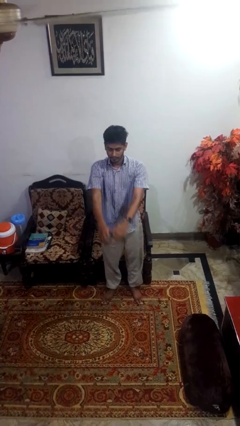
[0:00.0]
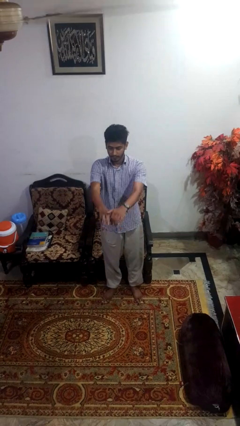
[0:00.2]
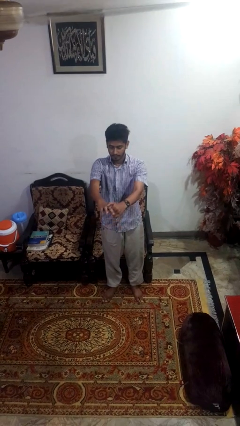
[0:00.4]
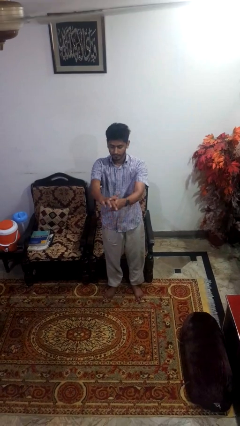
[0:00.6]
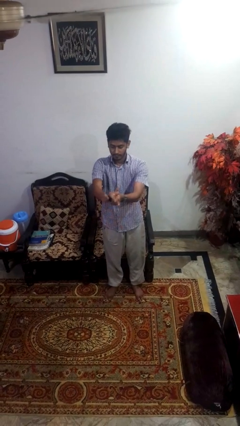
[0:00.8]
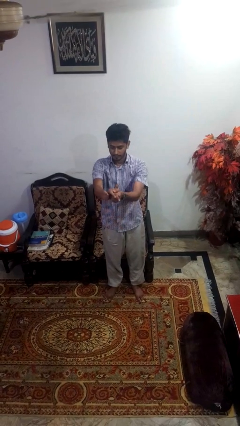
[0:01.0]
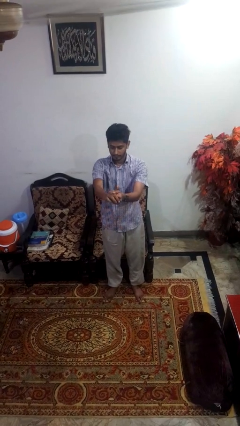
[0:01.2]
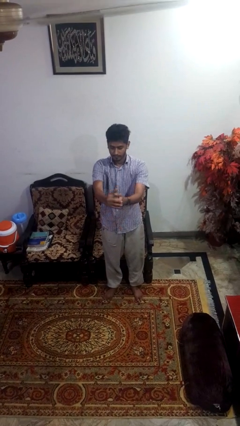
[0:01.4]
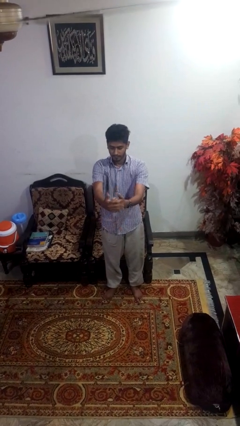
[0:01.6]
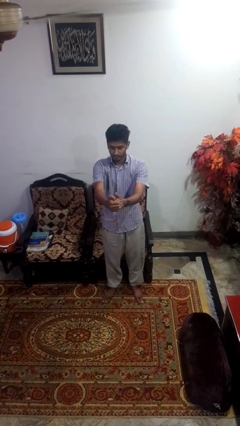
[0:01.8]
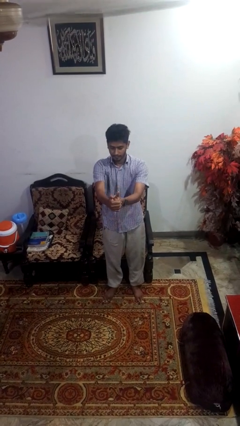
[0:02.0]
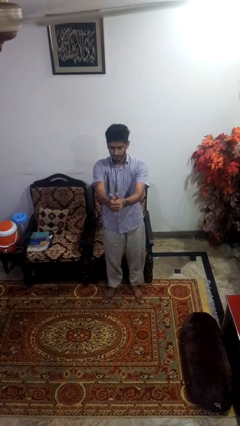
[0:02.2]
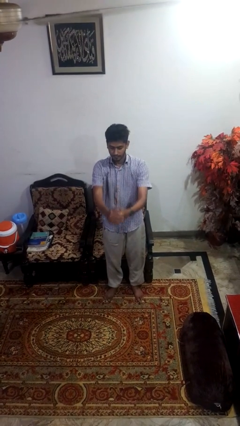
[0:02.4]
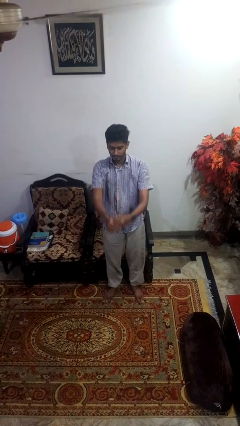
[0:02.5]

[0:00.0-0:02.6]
person cracks knuckles

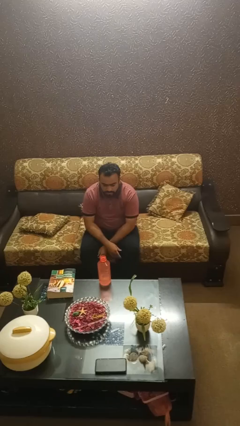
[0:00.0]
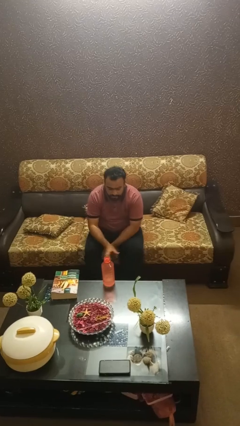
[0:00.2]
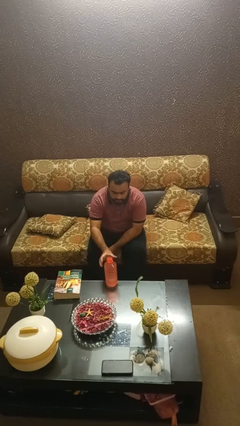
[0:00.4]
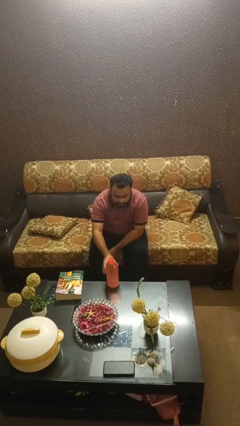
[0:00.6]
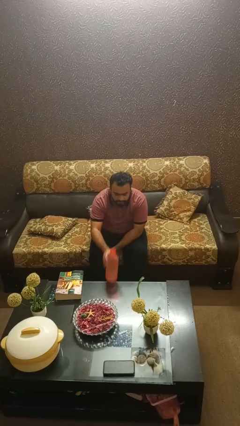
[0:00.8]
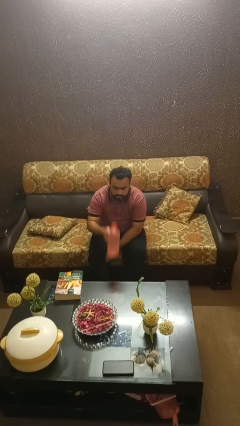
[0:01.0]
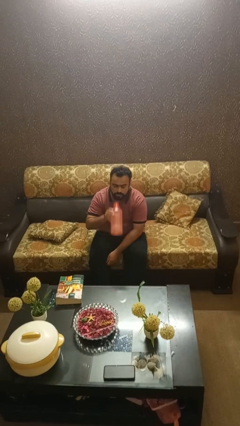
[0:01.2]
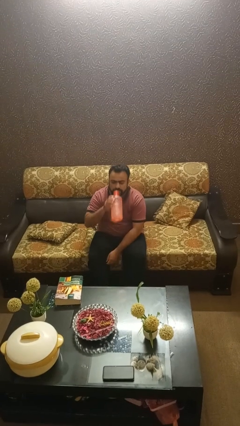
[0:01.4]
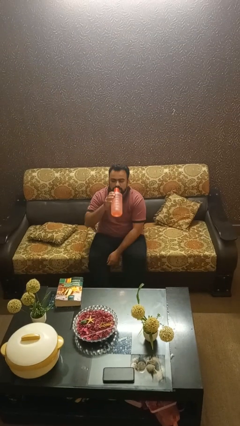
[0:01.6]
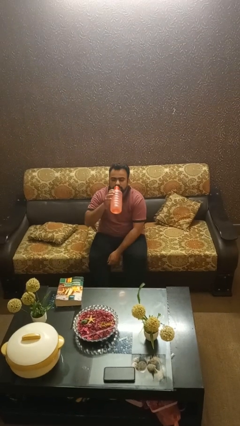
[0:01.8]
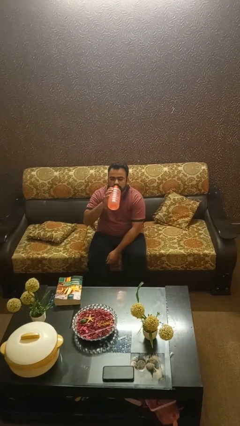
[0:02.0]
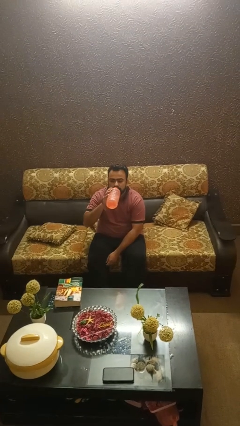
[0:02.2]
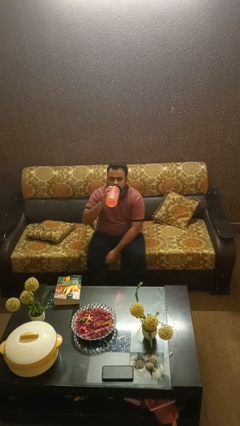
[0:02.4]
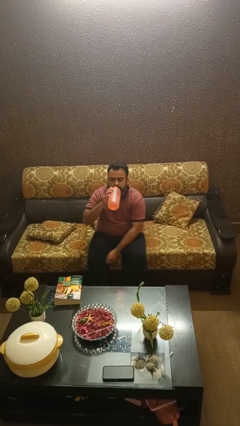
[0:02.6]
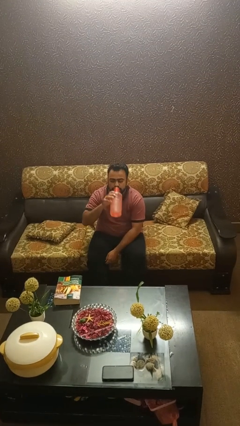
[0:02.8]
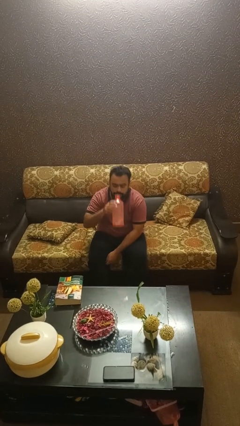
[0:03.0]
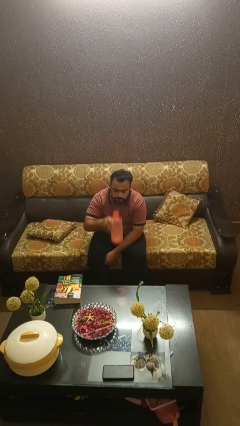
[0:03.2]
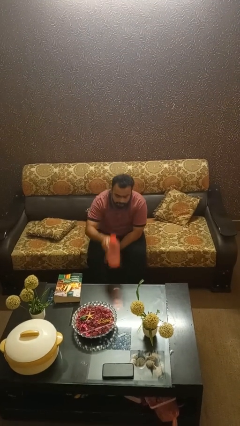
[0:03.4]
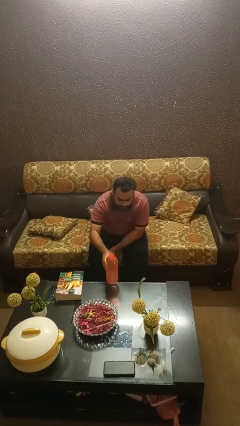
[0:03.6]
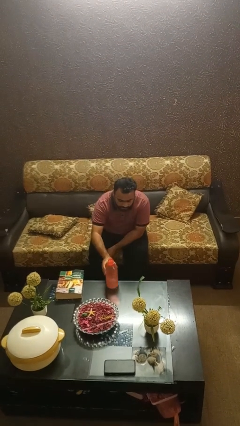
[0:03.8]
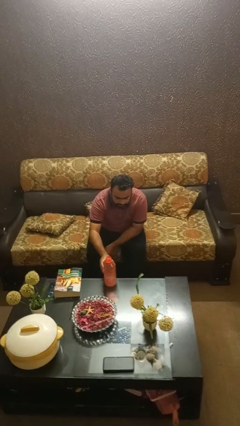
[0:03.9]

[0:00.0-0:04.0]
person drinks from bottle

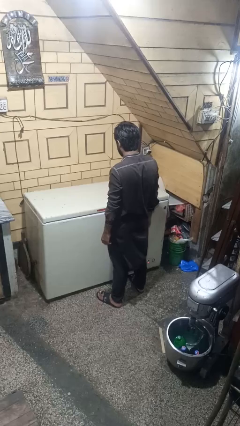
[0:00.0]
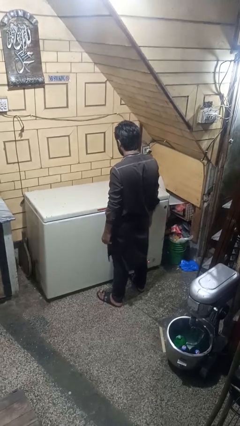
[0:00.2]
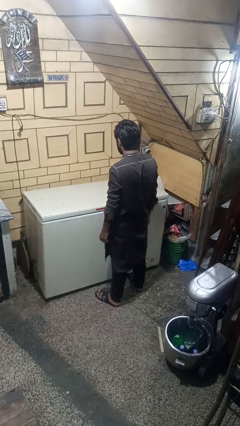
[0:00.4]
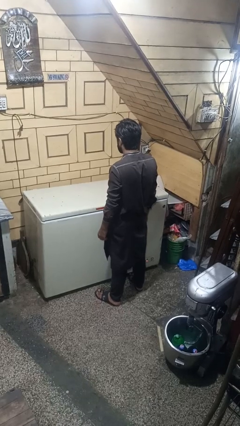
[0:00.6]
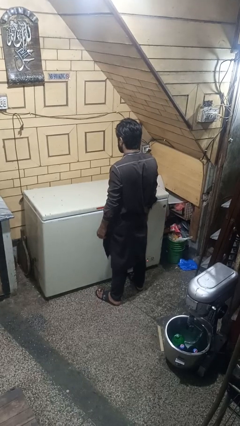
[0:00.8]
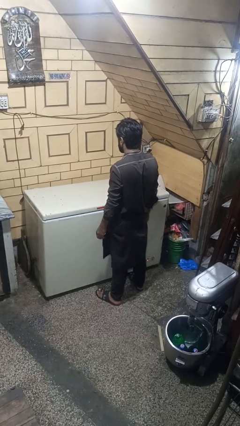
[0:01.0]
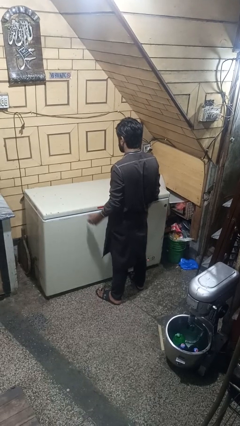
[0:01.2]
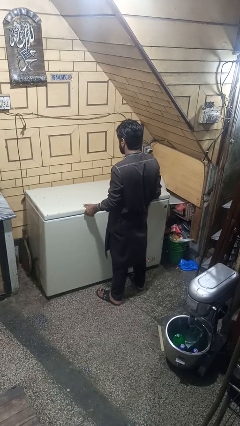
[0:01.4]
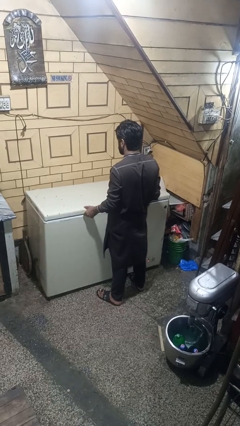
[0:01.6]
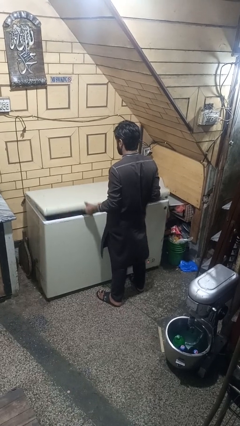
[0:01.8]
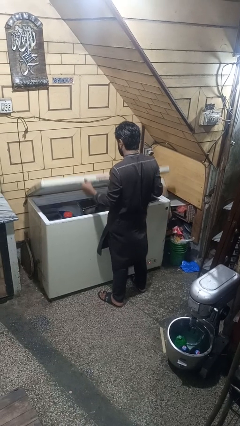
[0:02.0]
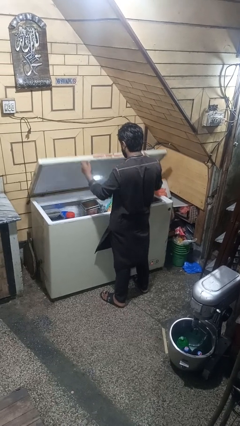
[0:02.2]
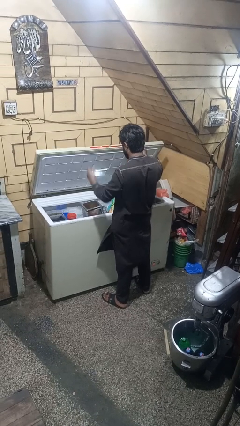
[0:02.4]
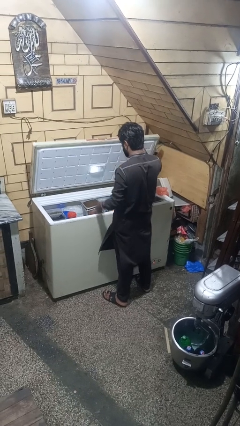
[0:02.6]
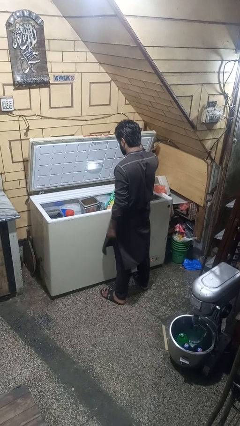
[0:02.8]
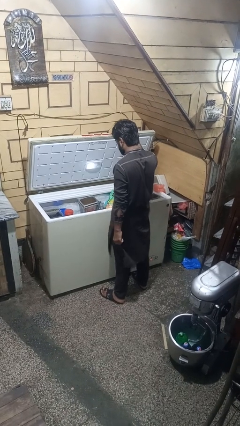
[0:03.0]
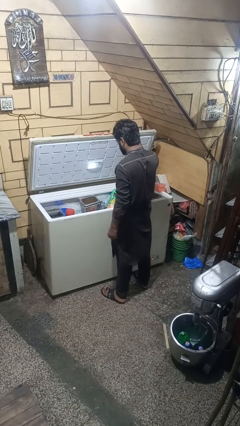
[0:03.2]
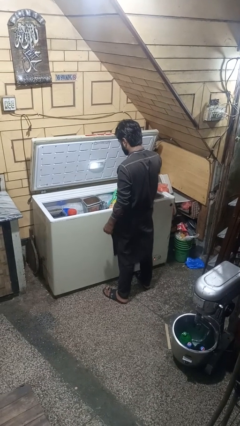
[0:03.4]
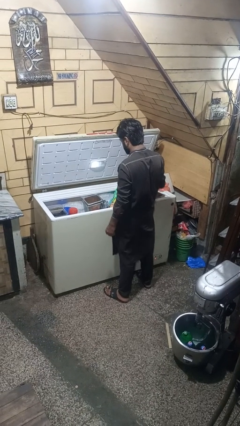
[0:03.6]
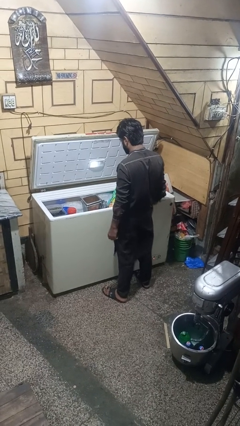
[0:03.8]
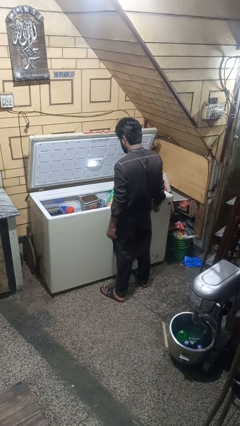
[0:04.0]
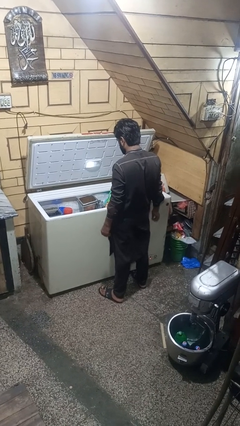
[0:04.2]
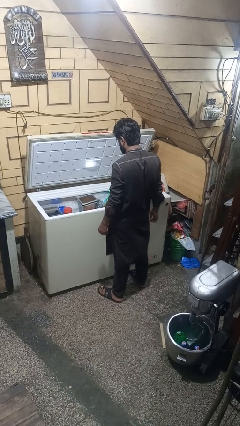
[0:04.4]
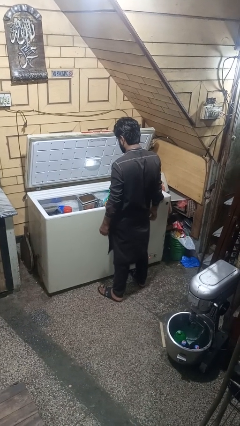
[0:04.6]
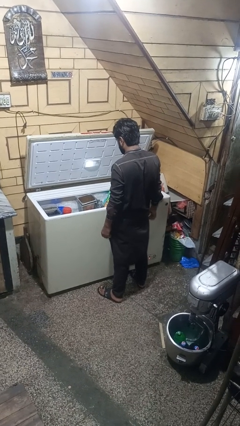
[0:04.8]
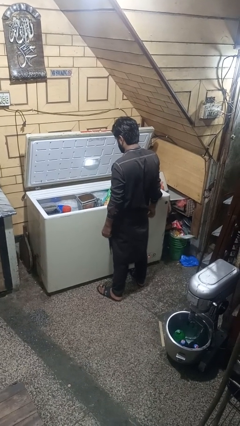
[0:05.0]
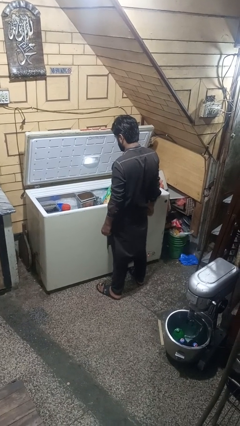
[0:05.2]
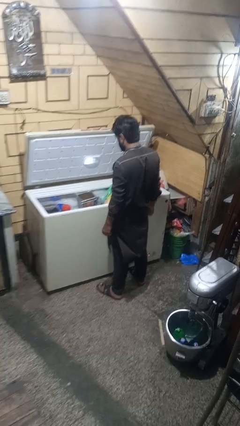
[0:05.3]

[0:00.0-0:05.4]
person opens refrigerator

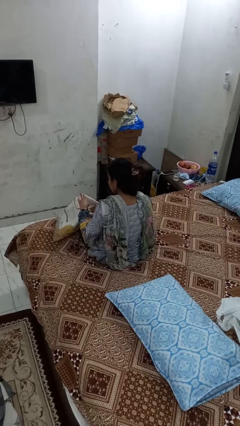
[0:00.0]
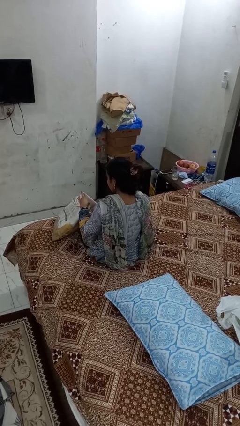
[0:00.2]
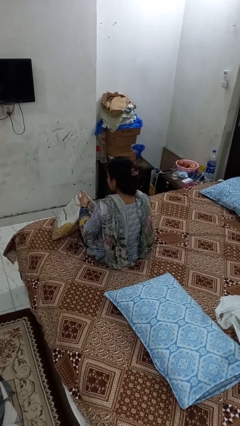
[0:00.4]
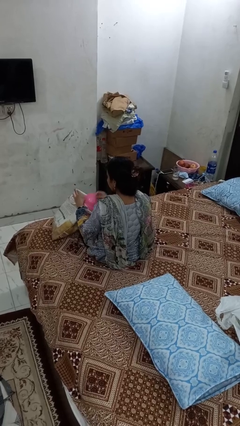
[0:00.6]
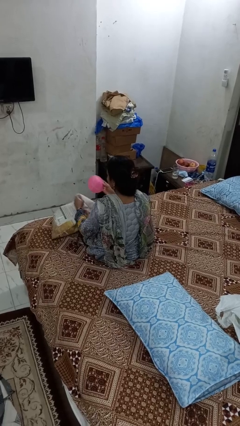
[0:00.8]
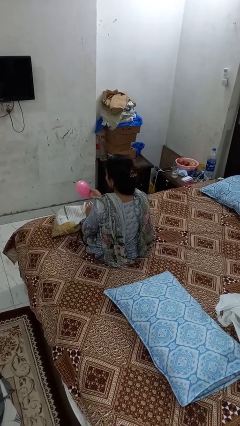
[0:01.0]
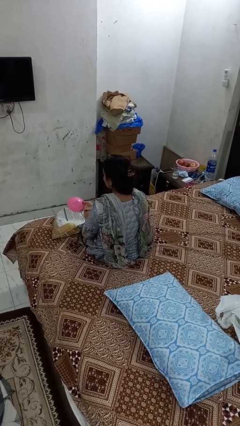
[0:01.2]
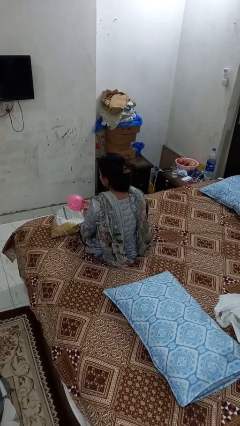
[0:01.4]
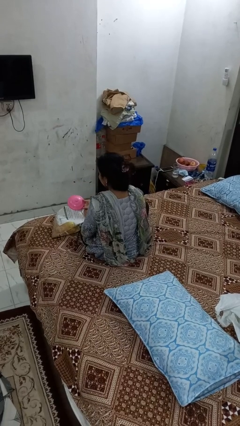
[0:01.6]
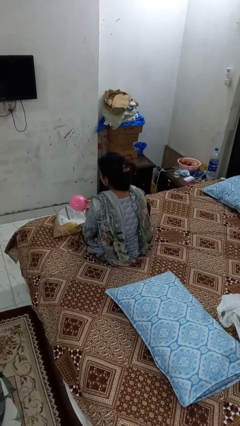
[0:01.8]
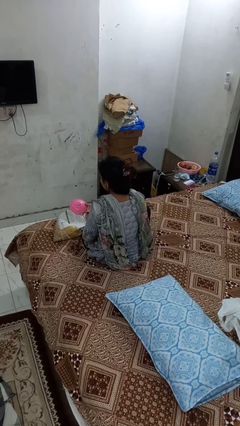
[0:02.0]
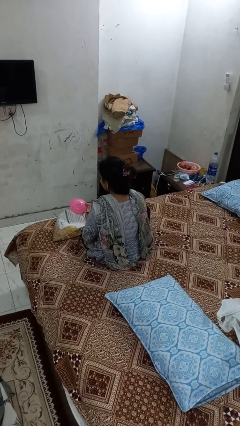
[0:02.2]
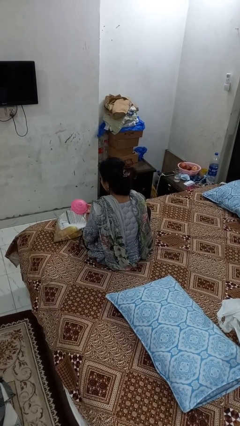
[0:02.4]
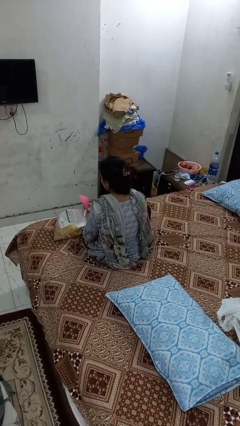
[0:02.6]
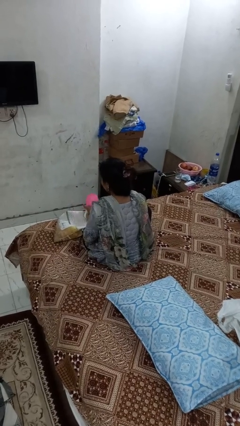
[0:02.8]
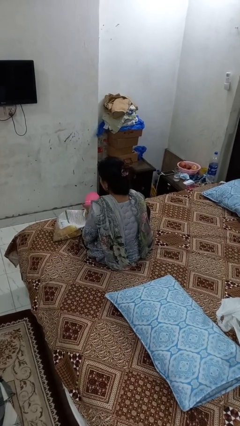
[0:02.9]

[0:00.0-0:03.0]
person takes object from bag

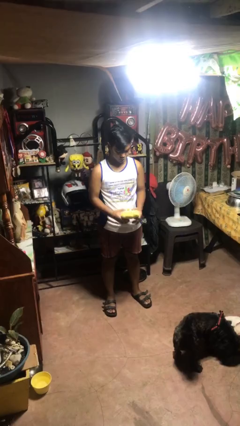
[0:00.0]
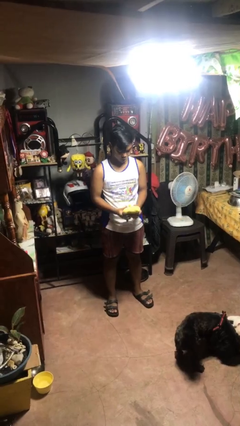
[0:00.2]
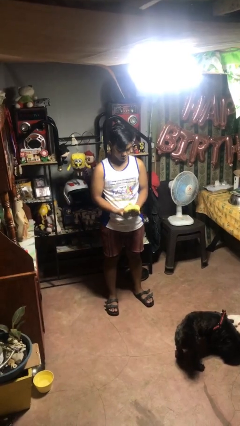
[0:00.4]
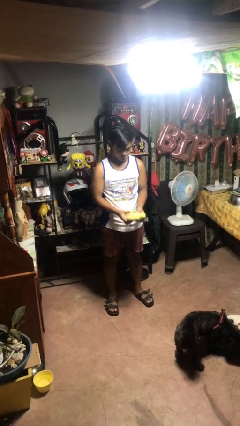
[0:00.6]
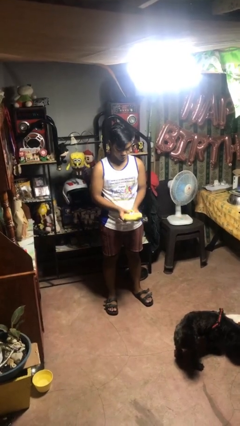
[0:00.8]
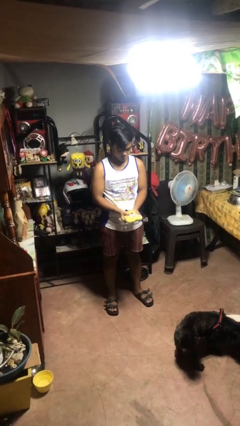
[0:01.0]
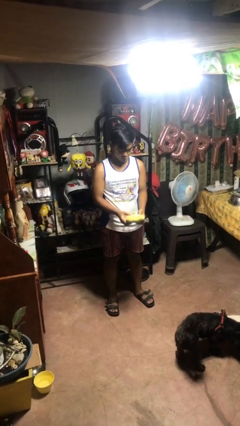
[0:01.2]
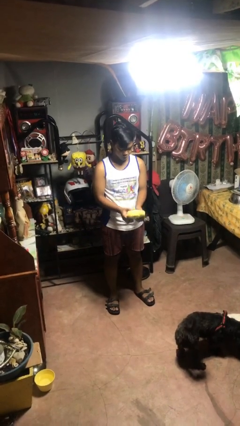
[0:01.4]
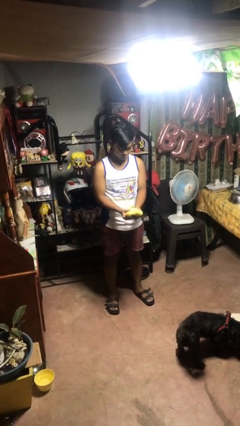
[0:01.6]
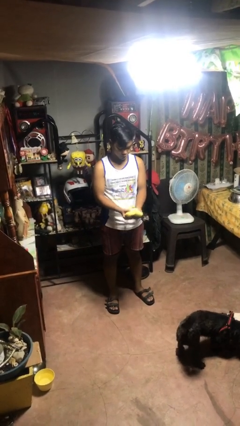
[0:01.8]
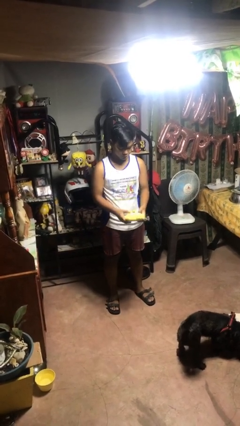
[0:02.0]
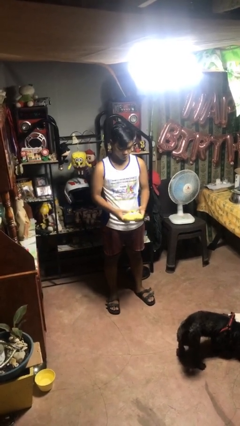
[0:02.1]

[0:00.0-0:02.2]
person squeezes object

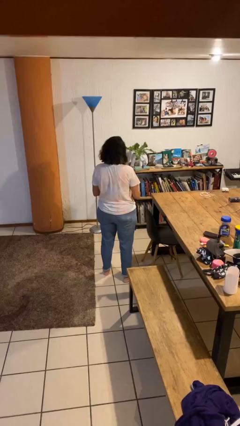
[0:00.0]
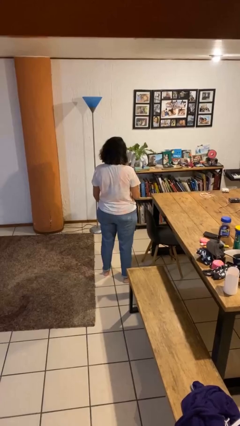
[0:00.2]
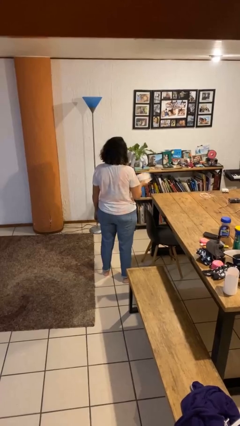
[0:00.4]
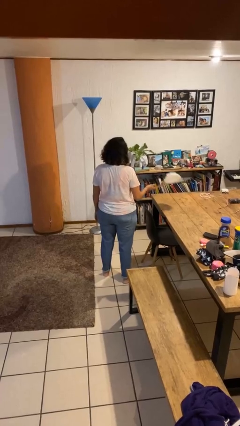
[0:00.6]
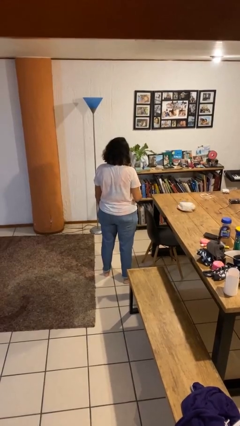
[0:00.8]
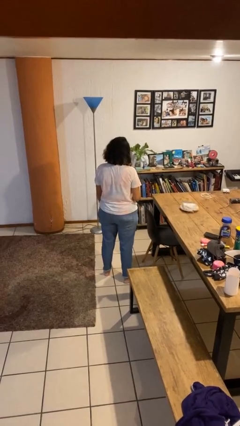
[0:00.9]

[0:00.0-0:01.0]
person throws object on table
